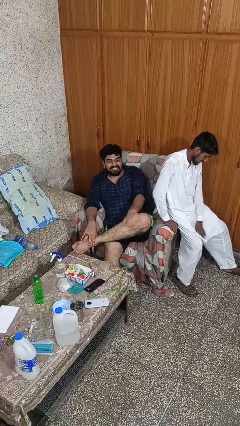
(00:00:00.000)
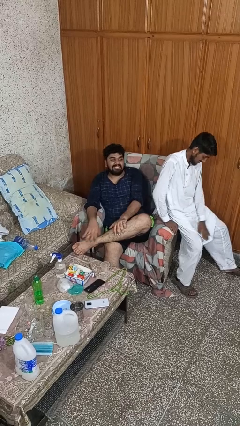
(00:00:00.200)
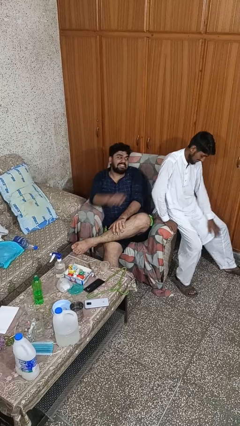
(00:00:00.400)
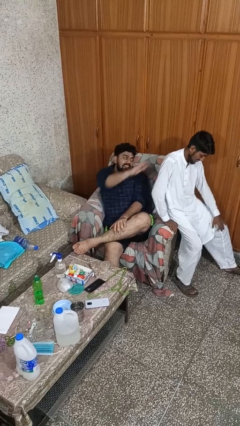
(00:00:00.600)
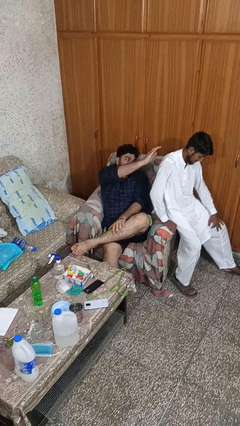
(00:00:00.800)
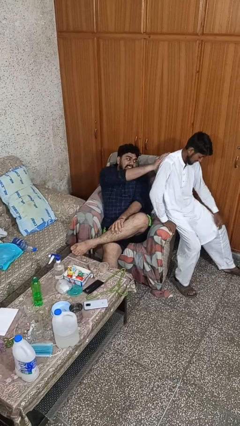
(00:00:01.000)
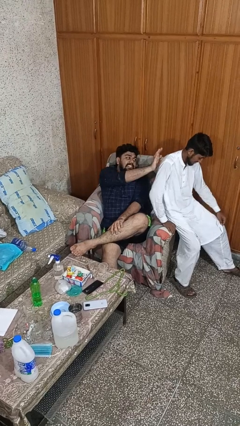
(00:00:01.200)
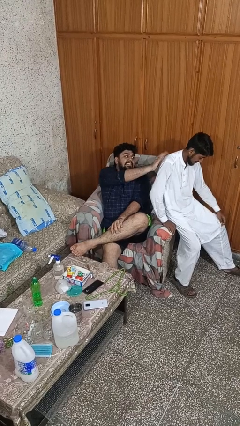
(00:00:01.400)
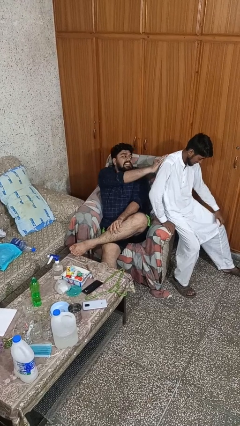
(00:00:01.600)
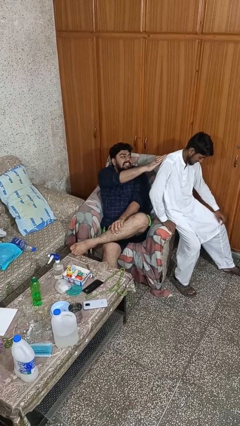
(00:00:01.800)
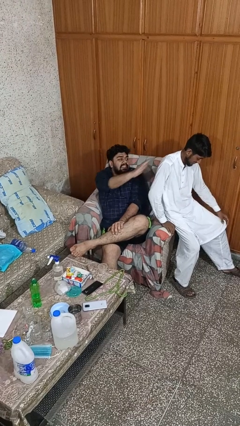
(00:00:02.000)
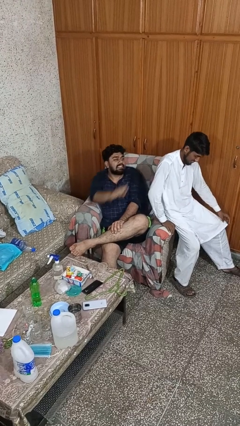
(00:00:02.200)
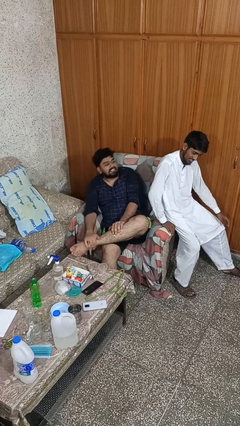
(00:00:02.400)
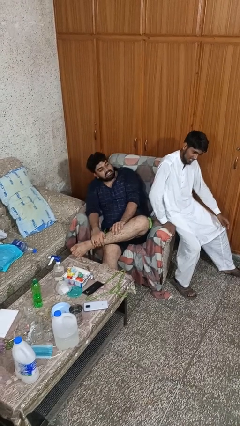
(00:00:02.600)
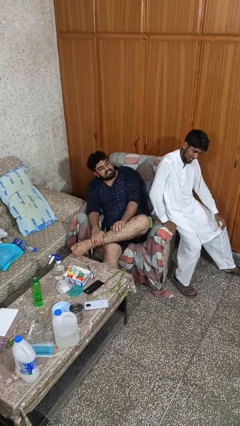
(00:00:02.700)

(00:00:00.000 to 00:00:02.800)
person pounds shoulders of person

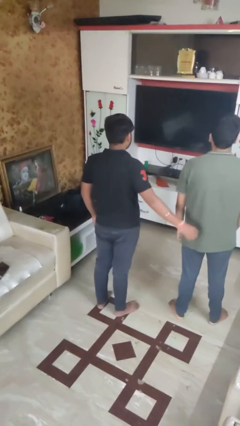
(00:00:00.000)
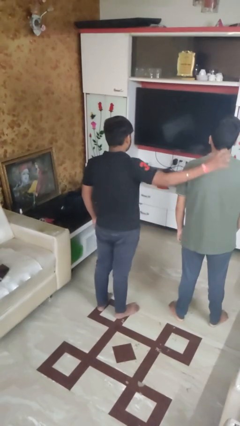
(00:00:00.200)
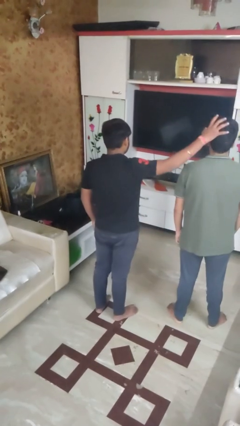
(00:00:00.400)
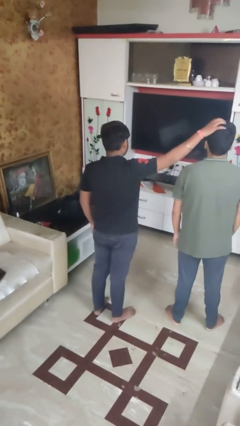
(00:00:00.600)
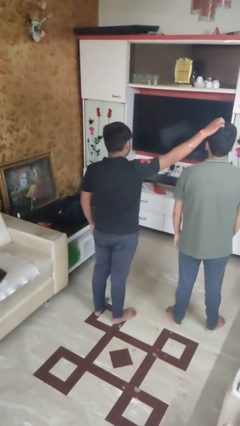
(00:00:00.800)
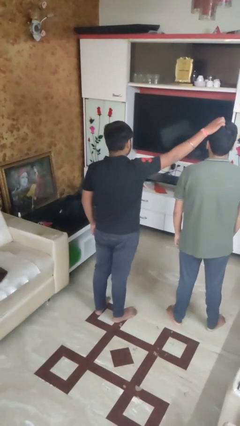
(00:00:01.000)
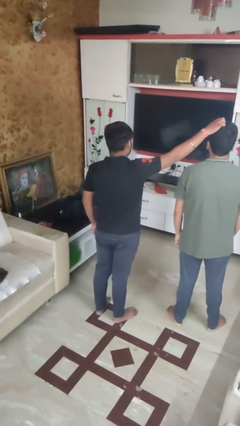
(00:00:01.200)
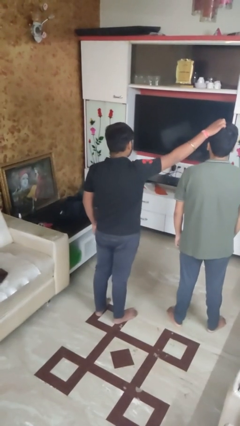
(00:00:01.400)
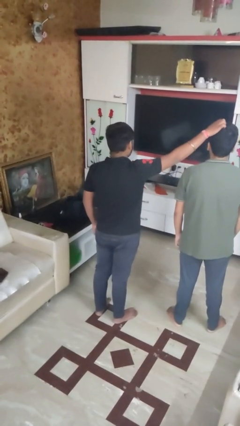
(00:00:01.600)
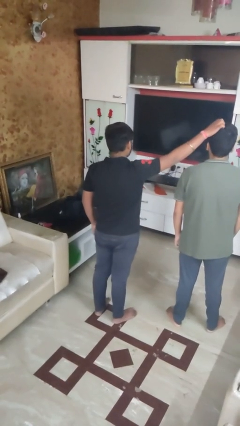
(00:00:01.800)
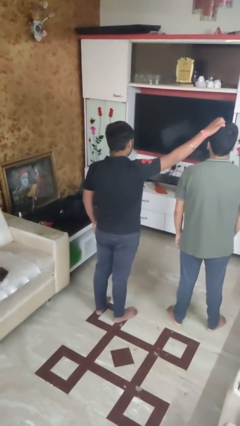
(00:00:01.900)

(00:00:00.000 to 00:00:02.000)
person grabs person by hair

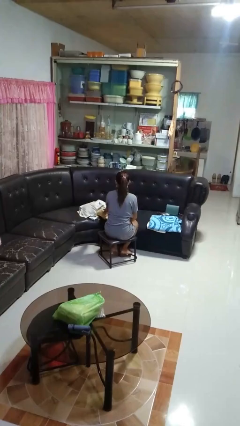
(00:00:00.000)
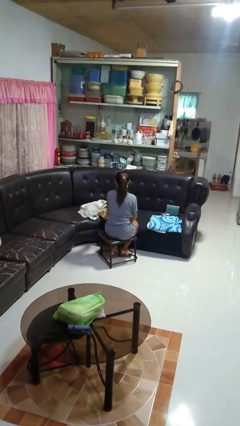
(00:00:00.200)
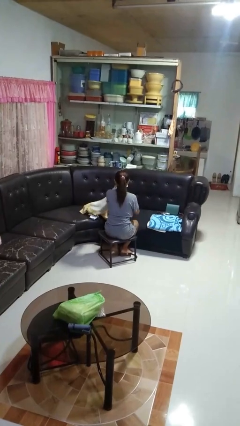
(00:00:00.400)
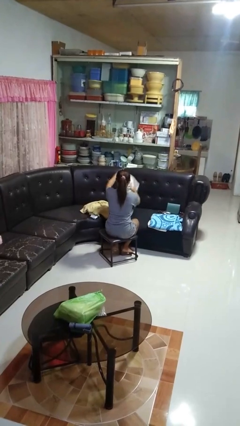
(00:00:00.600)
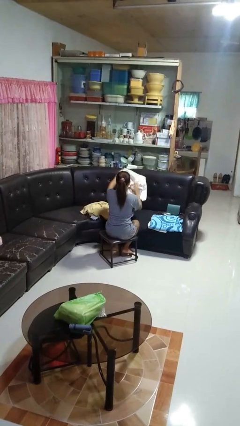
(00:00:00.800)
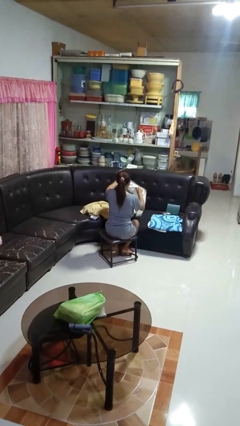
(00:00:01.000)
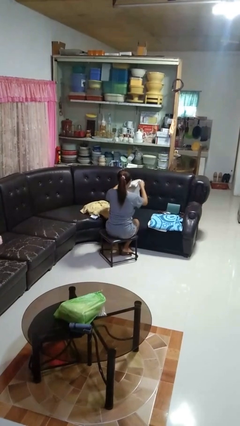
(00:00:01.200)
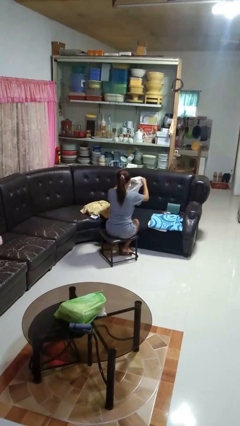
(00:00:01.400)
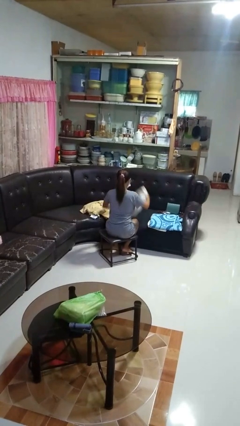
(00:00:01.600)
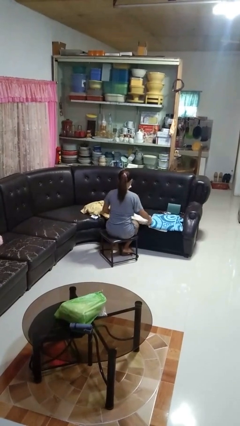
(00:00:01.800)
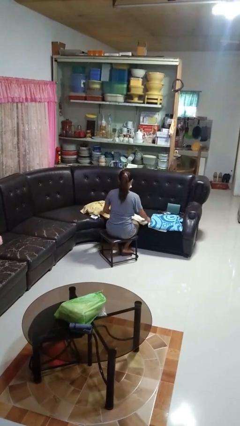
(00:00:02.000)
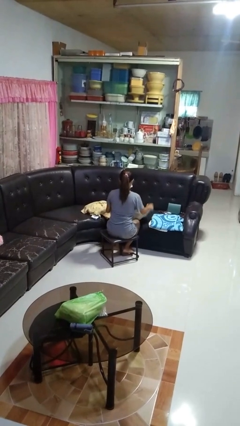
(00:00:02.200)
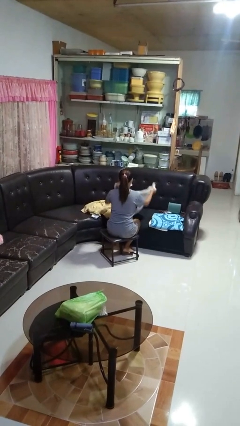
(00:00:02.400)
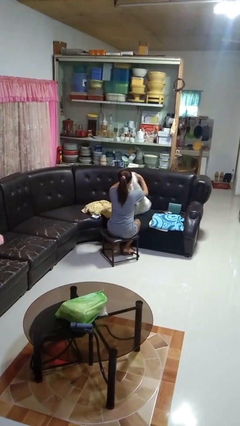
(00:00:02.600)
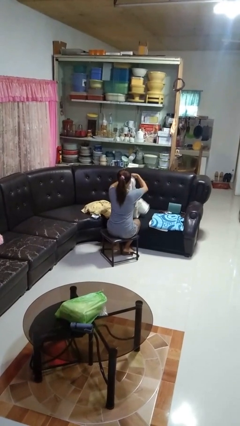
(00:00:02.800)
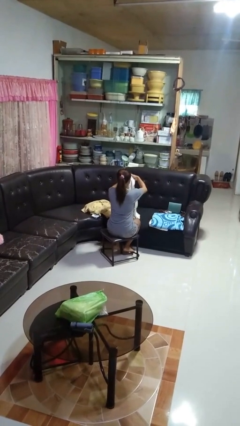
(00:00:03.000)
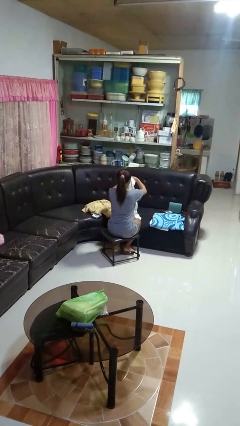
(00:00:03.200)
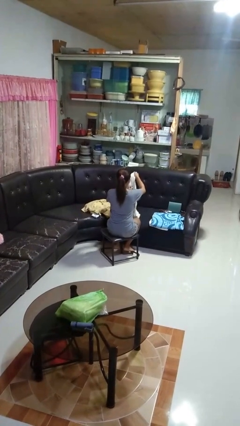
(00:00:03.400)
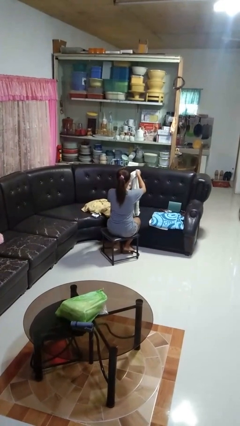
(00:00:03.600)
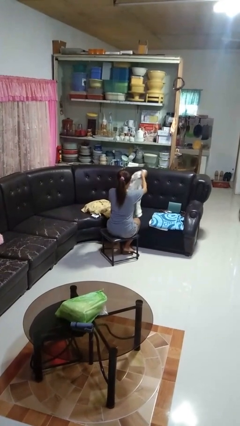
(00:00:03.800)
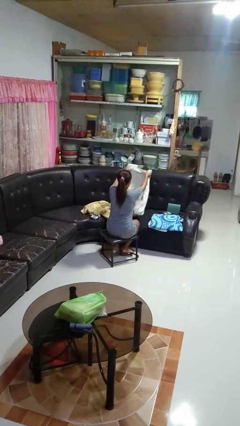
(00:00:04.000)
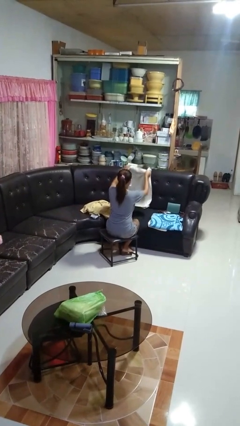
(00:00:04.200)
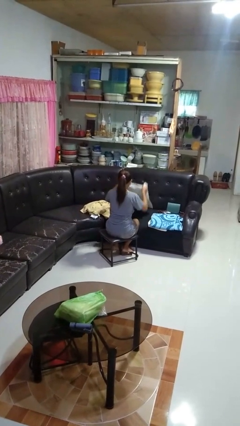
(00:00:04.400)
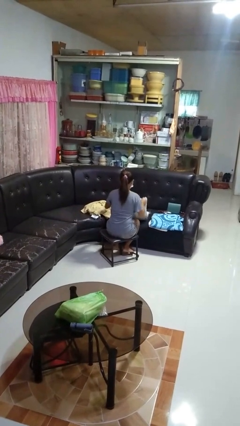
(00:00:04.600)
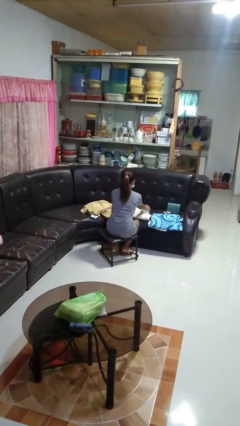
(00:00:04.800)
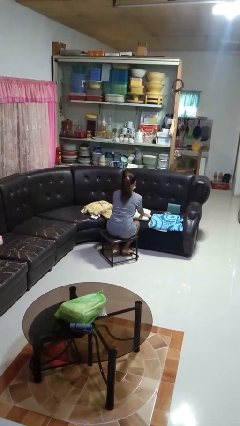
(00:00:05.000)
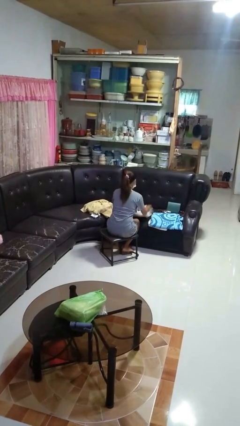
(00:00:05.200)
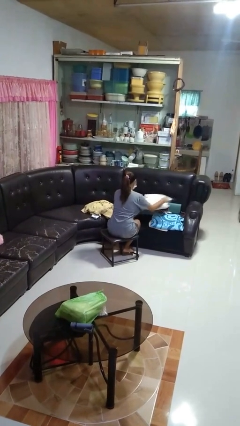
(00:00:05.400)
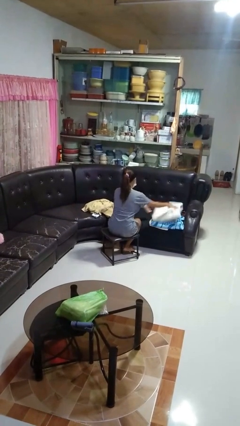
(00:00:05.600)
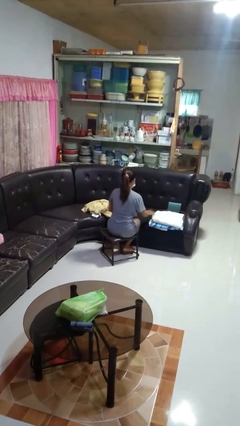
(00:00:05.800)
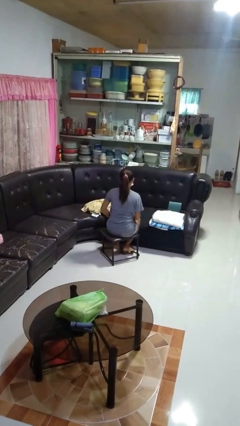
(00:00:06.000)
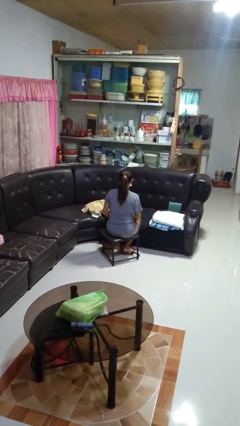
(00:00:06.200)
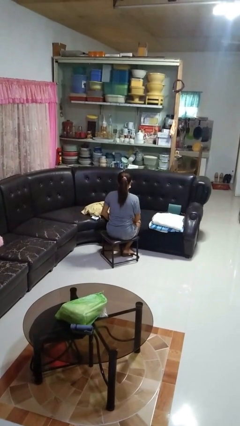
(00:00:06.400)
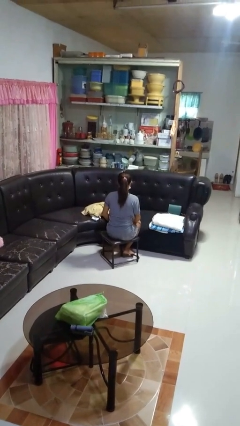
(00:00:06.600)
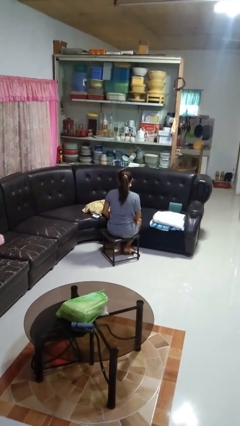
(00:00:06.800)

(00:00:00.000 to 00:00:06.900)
person folds towel

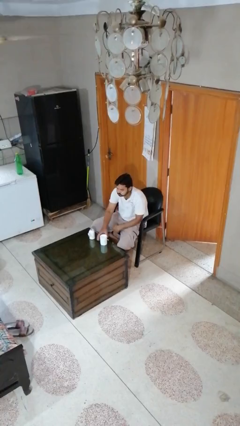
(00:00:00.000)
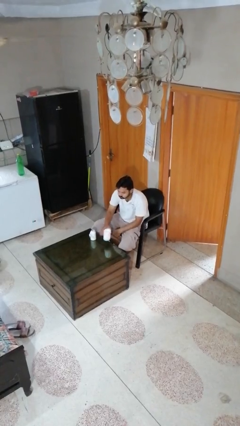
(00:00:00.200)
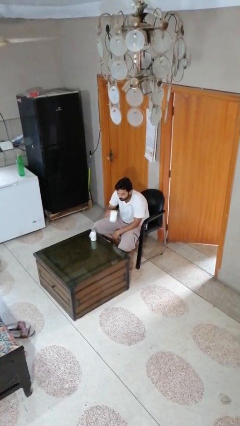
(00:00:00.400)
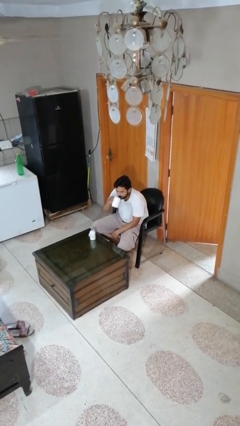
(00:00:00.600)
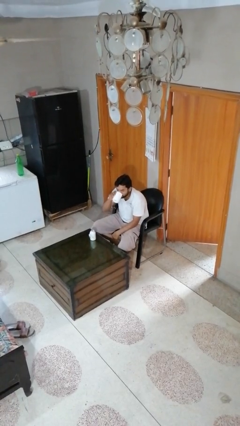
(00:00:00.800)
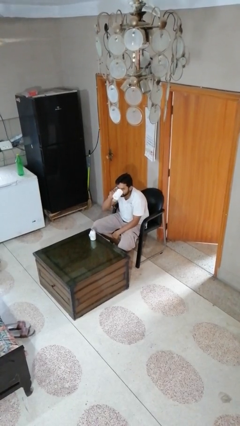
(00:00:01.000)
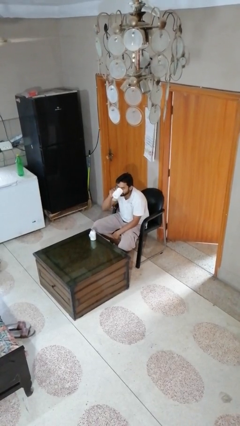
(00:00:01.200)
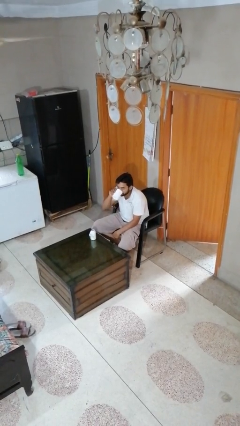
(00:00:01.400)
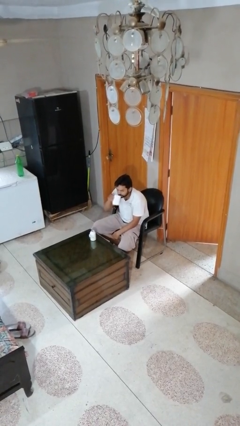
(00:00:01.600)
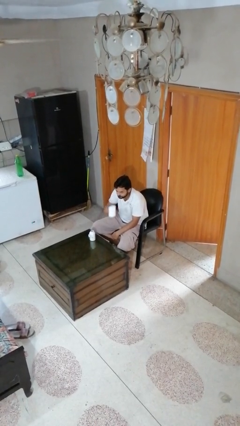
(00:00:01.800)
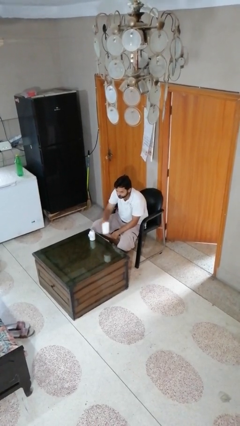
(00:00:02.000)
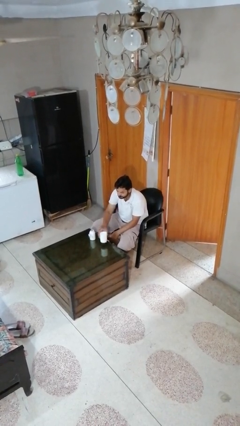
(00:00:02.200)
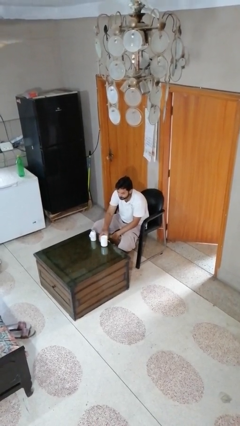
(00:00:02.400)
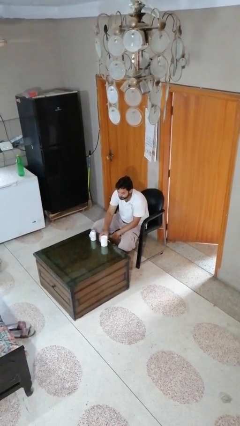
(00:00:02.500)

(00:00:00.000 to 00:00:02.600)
person drinks from cup

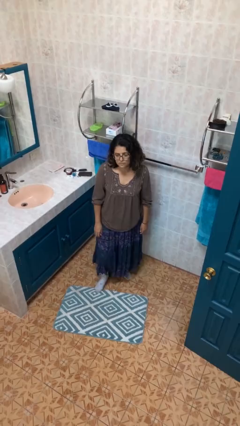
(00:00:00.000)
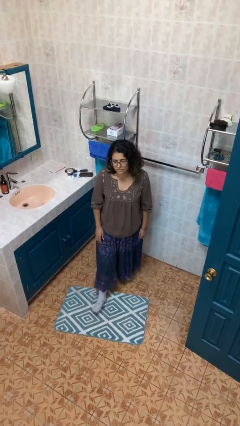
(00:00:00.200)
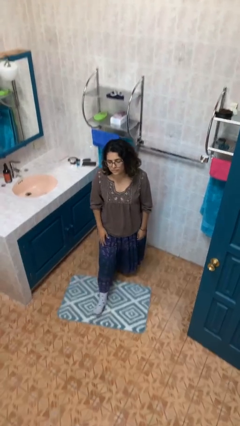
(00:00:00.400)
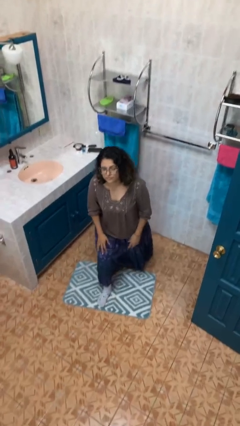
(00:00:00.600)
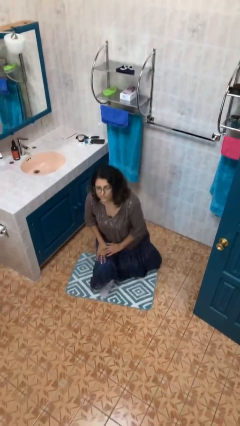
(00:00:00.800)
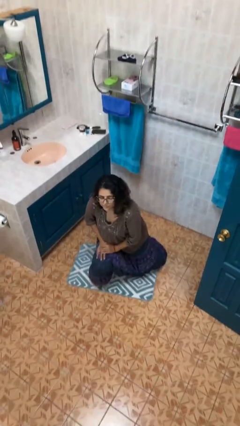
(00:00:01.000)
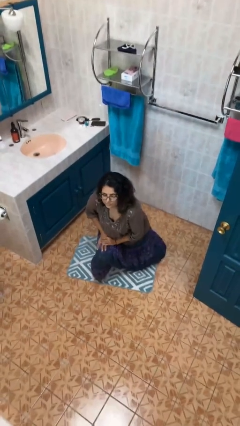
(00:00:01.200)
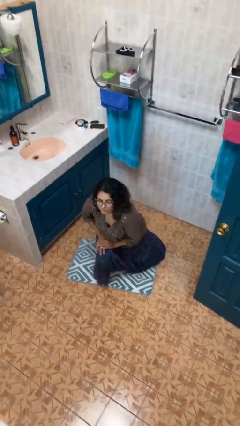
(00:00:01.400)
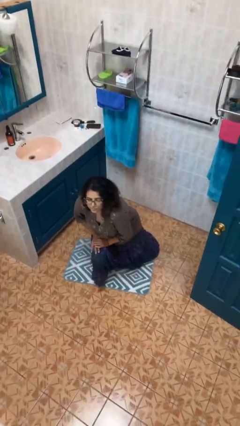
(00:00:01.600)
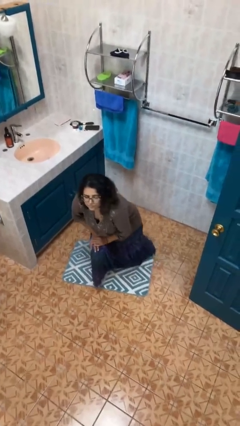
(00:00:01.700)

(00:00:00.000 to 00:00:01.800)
person kneels

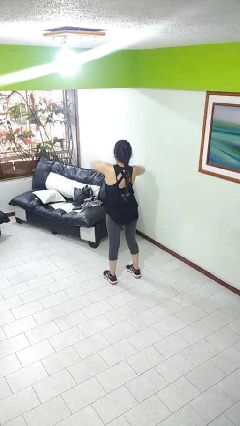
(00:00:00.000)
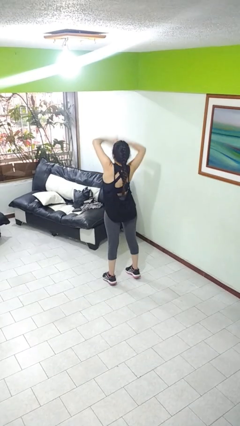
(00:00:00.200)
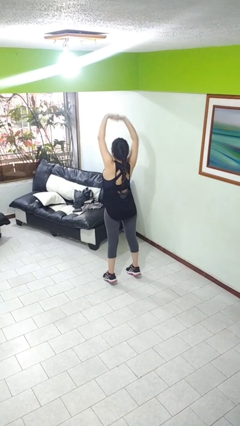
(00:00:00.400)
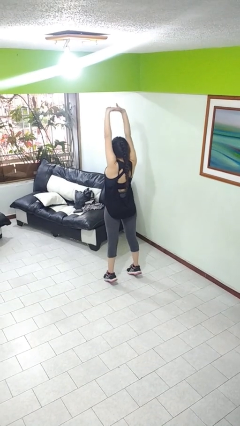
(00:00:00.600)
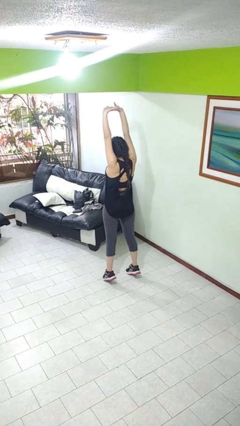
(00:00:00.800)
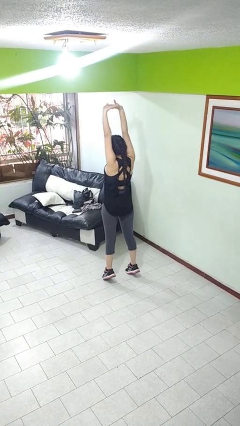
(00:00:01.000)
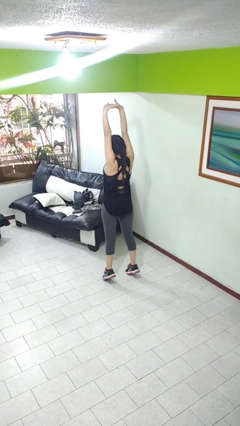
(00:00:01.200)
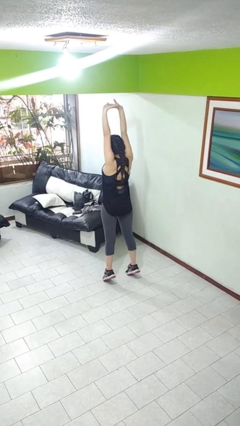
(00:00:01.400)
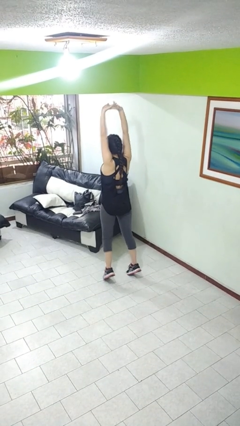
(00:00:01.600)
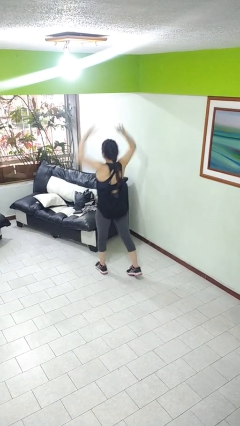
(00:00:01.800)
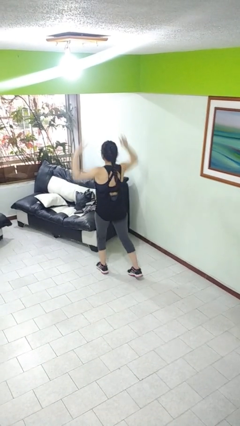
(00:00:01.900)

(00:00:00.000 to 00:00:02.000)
person stretches arms over head
